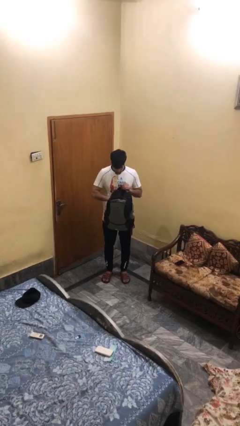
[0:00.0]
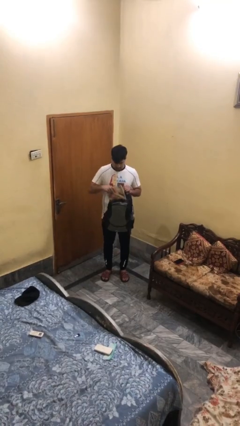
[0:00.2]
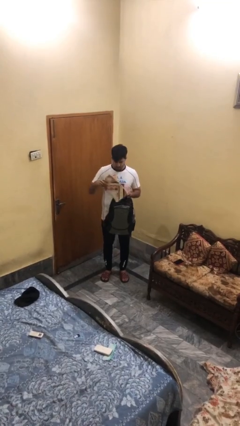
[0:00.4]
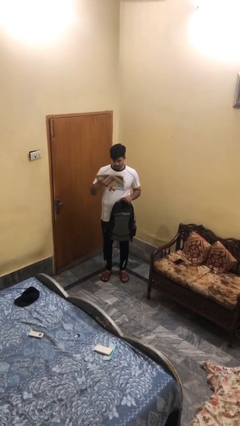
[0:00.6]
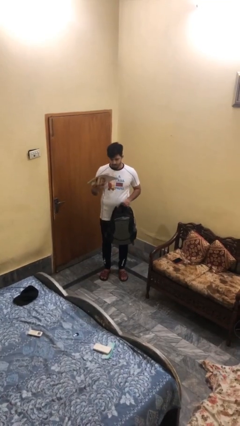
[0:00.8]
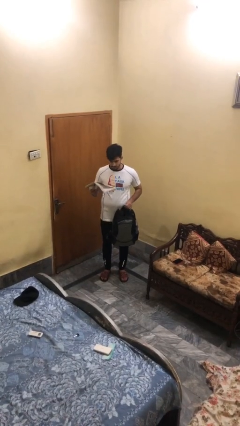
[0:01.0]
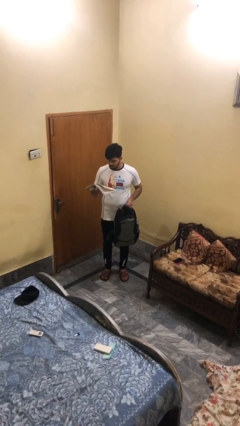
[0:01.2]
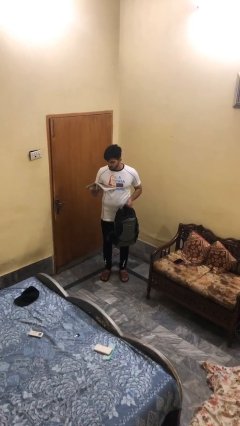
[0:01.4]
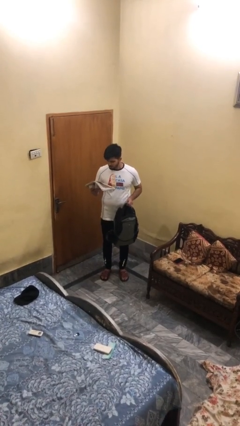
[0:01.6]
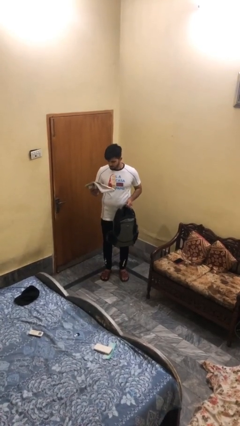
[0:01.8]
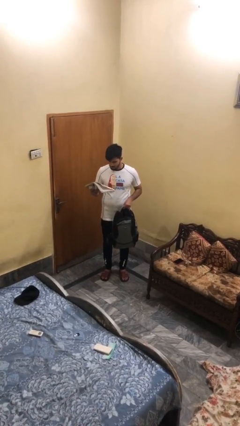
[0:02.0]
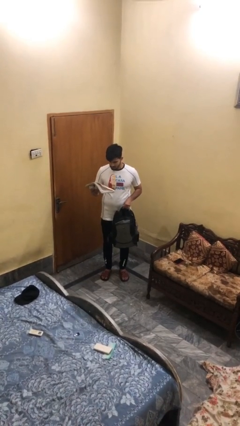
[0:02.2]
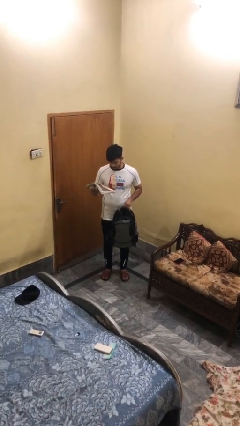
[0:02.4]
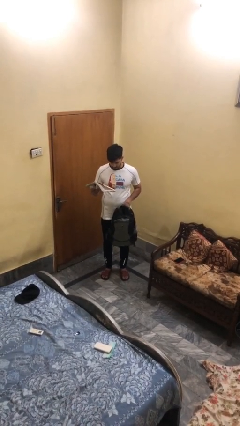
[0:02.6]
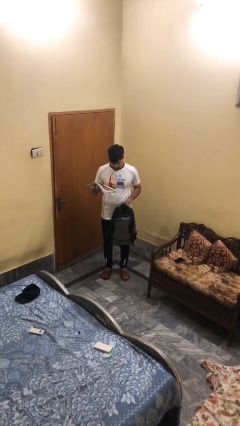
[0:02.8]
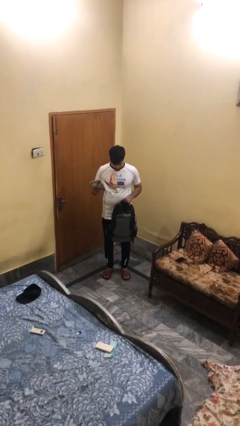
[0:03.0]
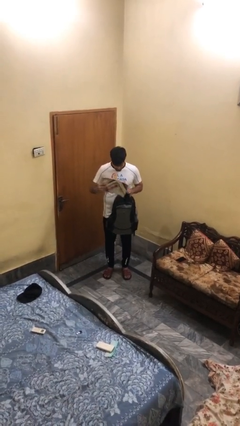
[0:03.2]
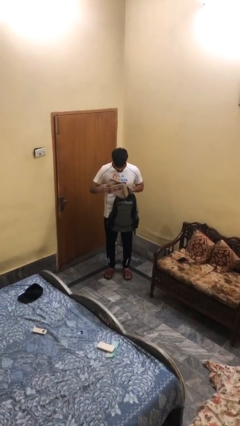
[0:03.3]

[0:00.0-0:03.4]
person takes object from backpack

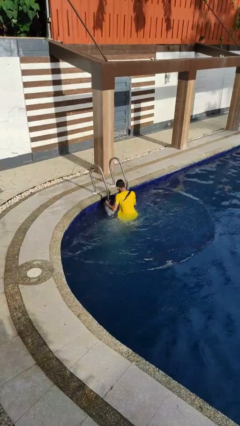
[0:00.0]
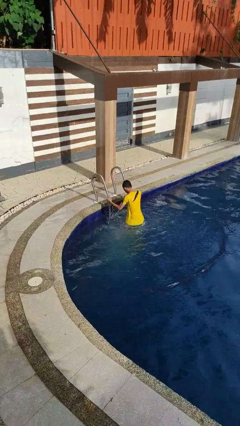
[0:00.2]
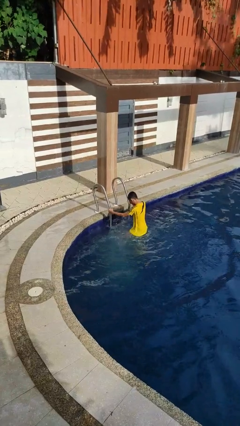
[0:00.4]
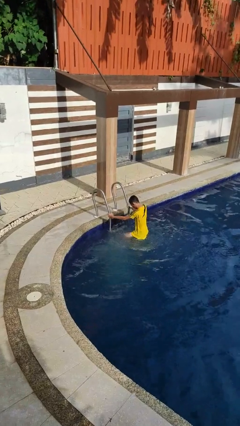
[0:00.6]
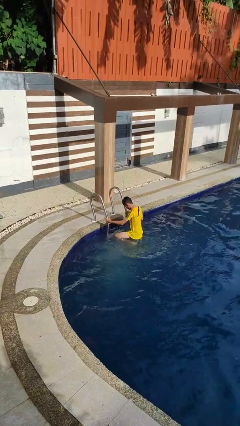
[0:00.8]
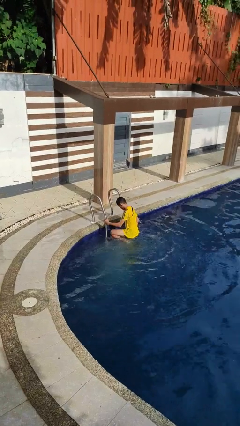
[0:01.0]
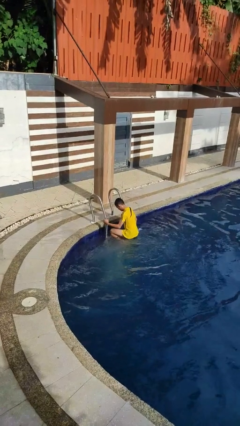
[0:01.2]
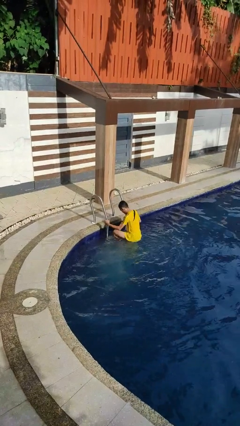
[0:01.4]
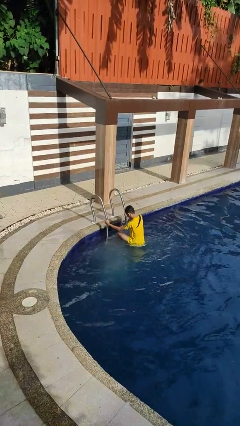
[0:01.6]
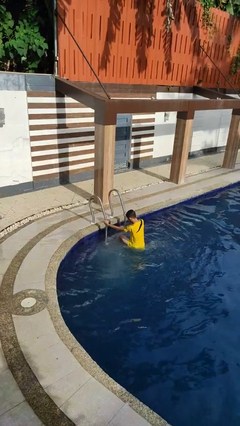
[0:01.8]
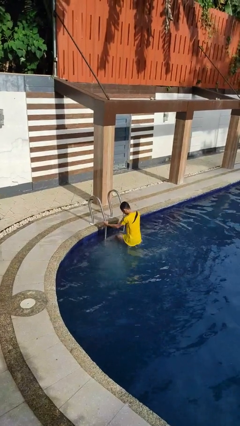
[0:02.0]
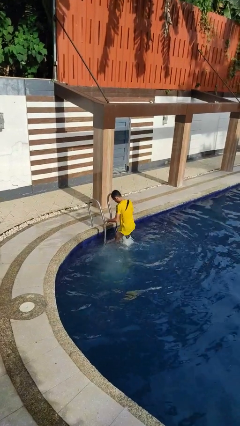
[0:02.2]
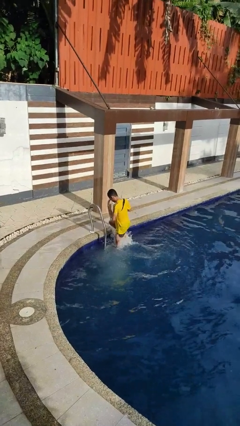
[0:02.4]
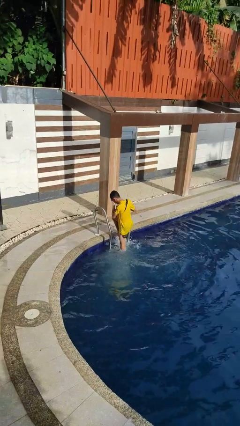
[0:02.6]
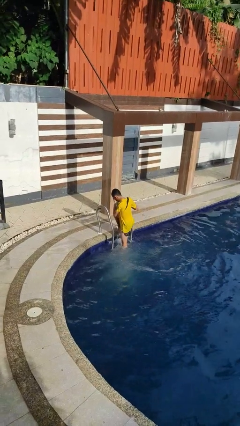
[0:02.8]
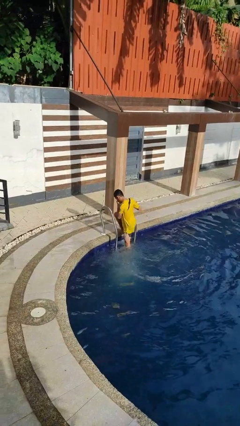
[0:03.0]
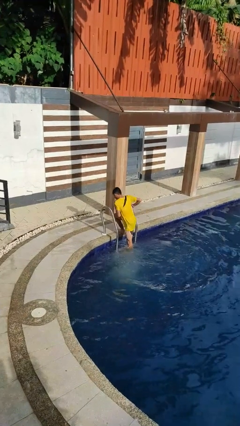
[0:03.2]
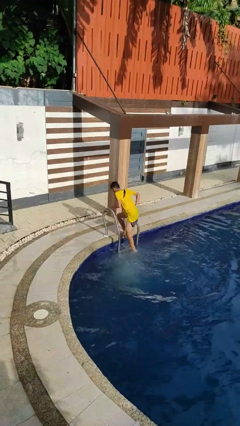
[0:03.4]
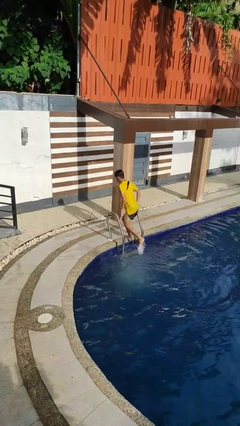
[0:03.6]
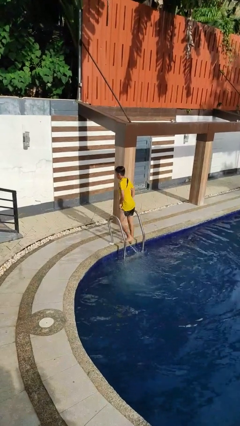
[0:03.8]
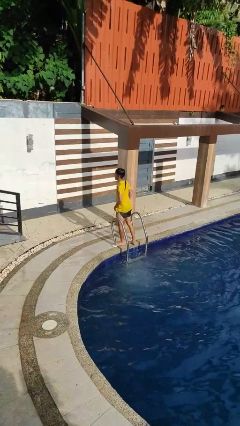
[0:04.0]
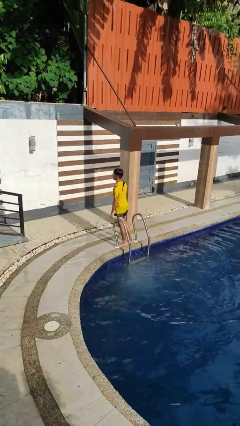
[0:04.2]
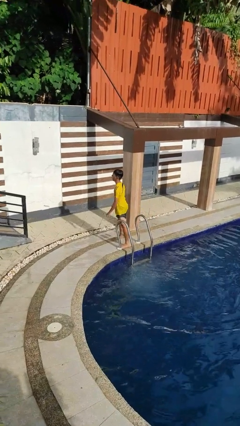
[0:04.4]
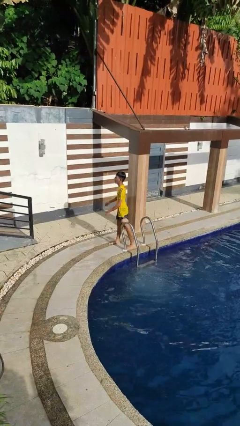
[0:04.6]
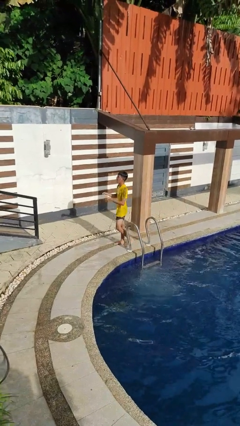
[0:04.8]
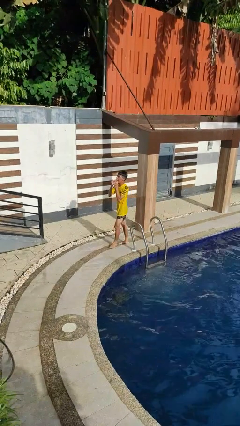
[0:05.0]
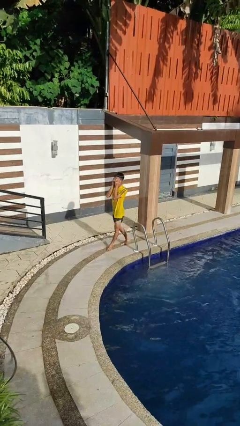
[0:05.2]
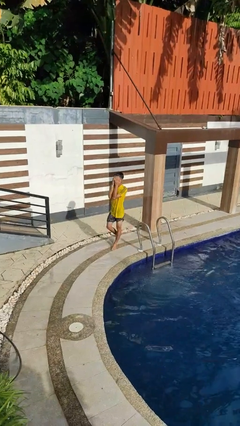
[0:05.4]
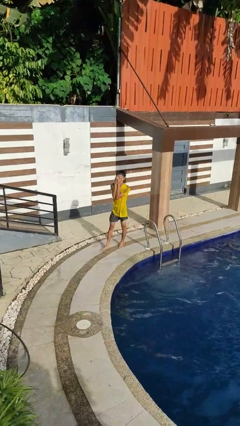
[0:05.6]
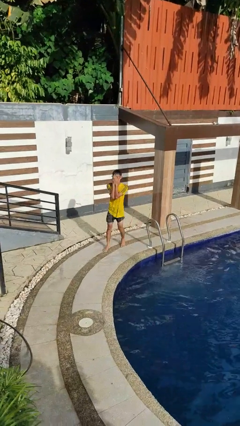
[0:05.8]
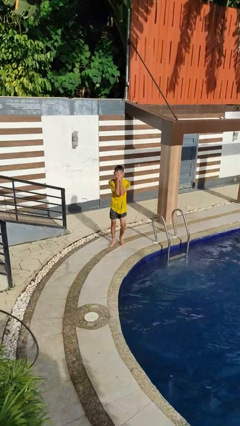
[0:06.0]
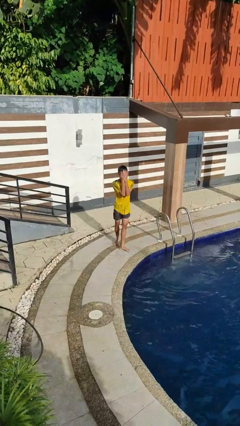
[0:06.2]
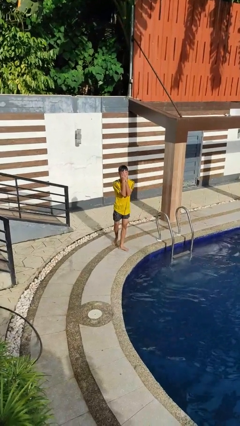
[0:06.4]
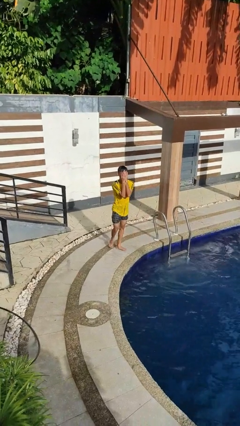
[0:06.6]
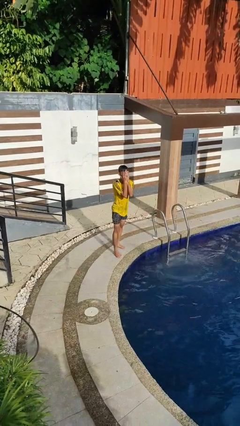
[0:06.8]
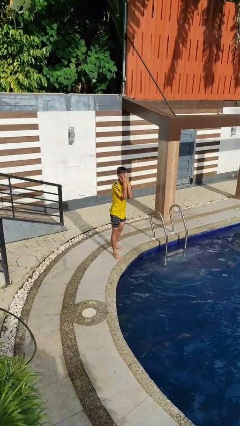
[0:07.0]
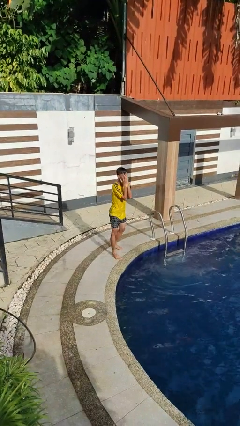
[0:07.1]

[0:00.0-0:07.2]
person exits pool

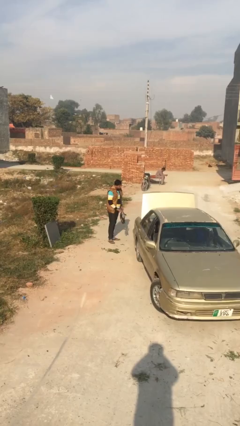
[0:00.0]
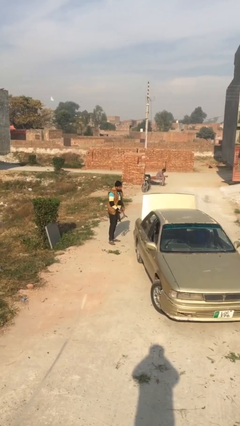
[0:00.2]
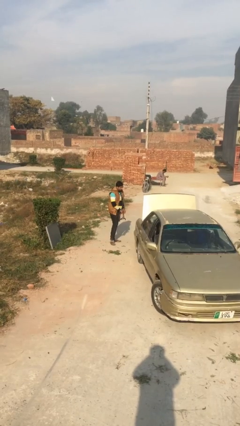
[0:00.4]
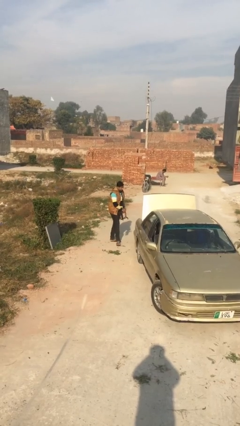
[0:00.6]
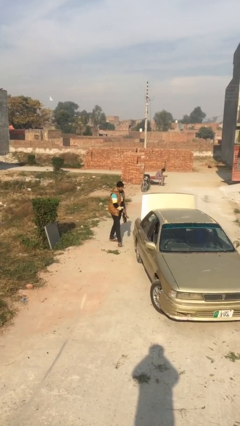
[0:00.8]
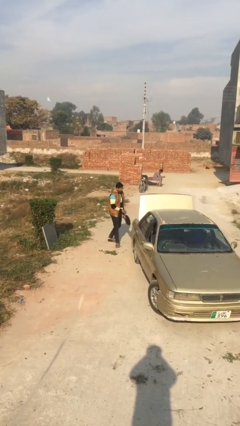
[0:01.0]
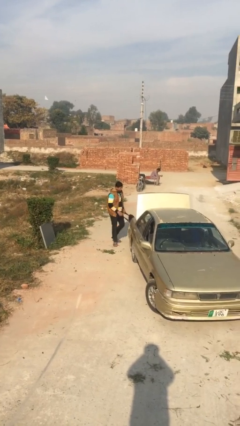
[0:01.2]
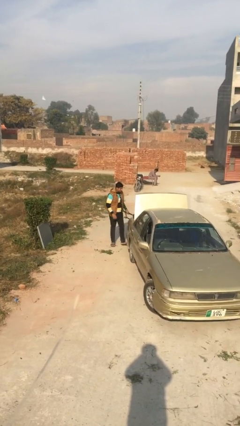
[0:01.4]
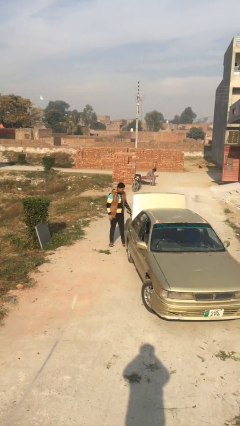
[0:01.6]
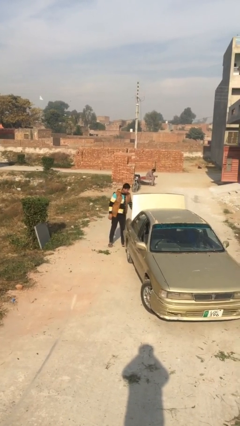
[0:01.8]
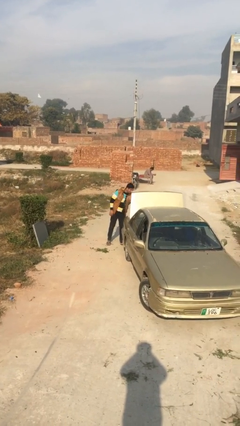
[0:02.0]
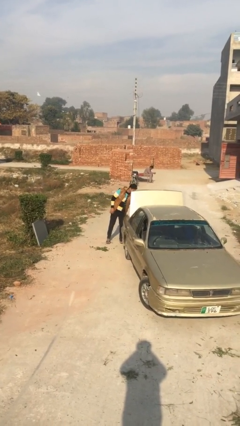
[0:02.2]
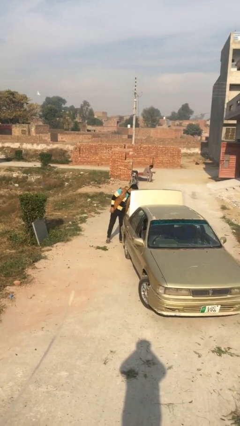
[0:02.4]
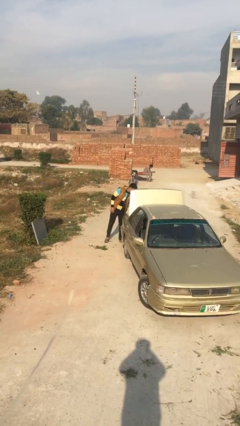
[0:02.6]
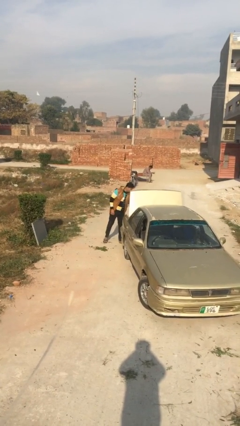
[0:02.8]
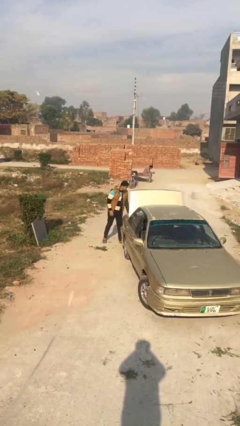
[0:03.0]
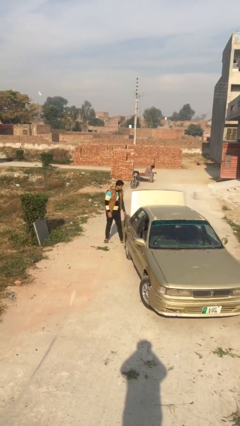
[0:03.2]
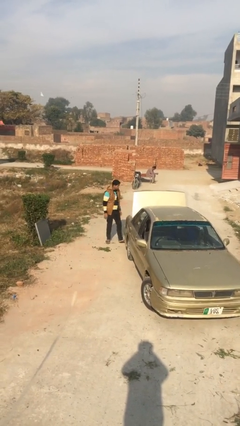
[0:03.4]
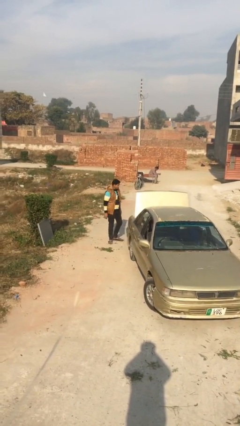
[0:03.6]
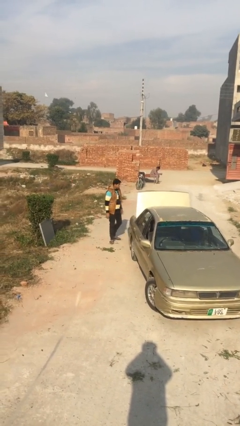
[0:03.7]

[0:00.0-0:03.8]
person loads car

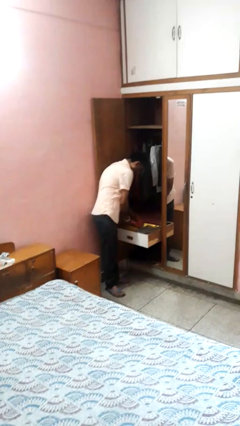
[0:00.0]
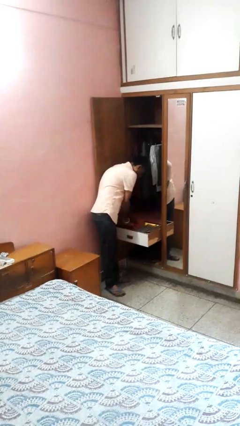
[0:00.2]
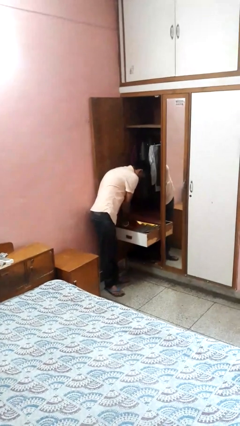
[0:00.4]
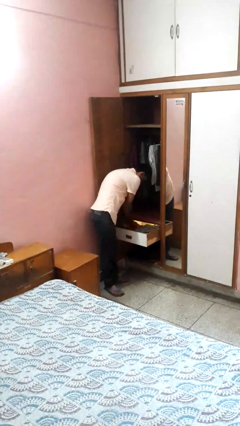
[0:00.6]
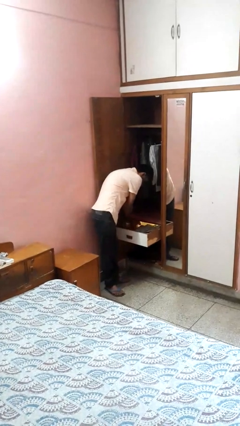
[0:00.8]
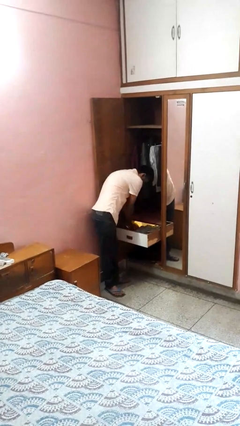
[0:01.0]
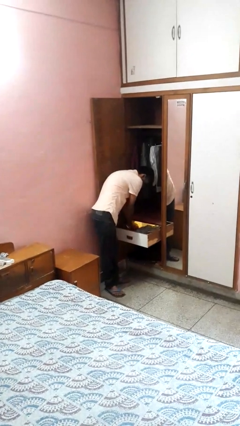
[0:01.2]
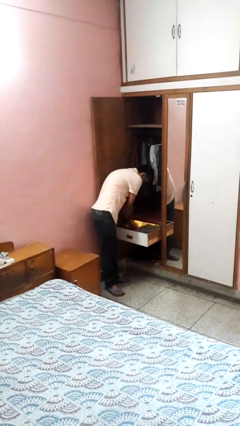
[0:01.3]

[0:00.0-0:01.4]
person puts clothes into dresser

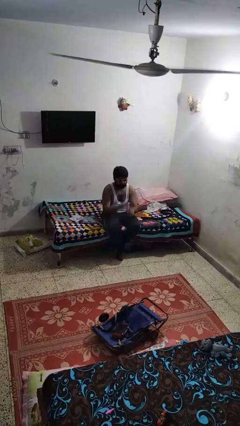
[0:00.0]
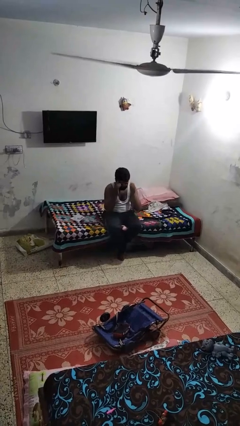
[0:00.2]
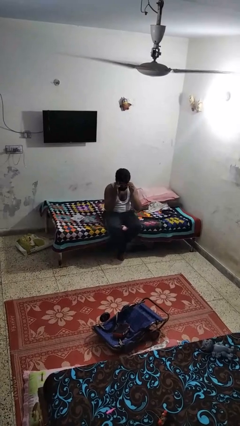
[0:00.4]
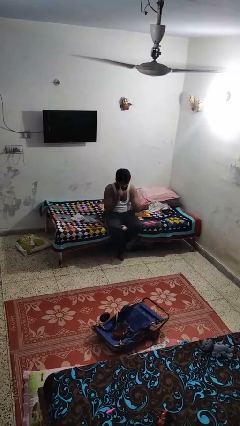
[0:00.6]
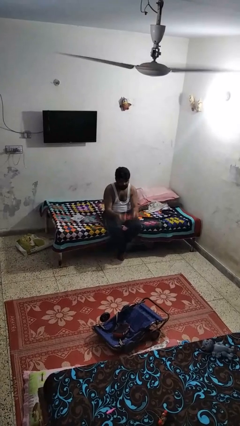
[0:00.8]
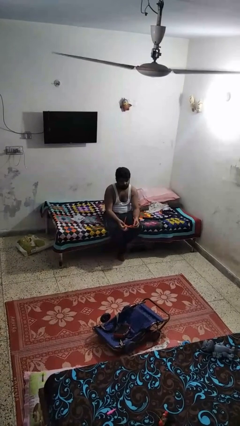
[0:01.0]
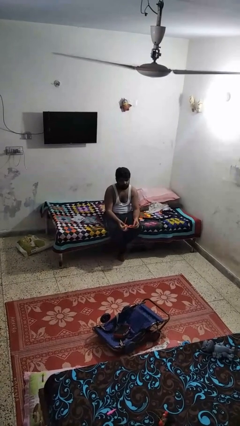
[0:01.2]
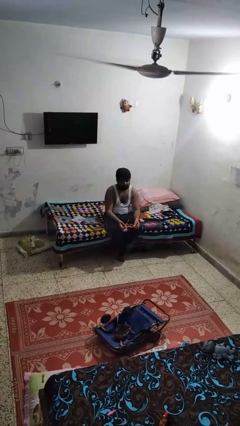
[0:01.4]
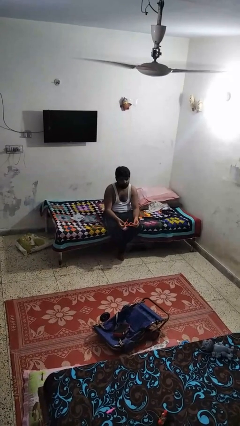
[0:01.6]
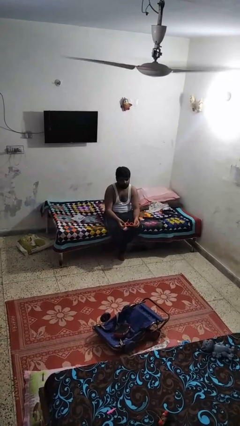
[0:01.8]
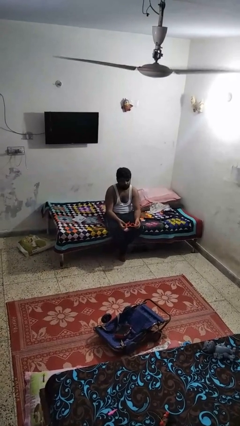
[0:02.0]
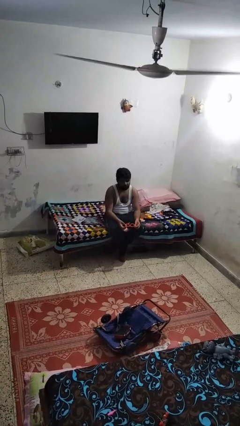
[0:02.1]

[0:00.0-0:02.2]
person takes off sunglasses
